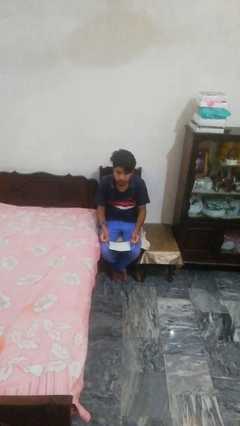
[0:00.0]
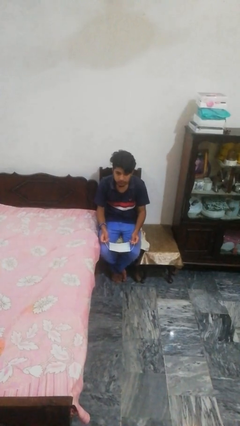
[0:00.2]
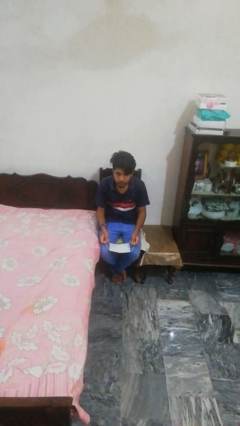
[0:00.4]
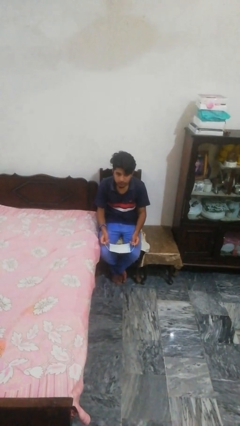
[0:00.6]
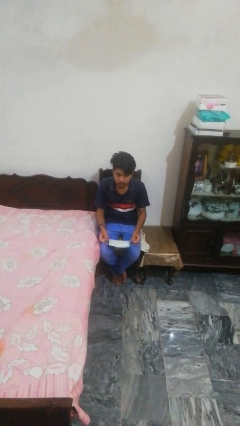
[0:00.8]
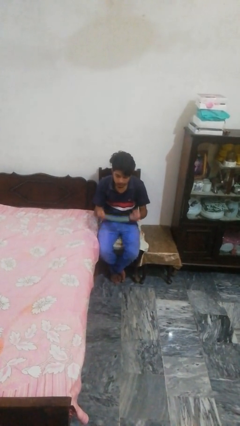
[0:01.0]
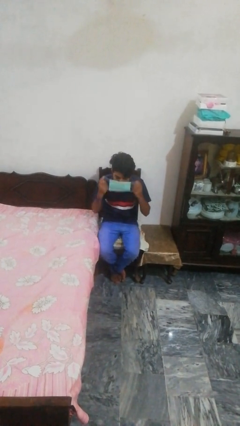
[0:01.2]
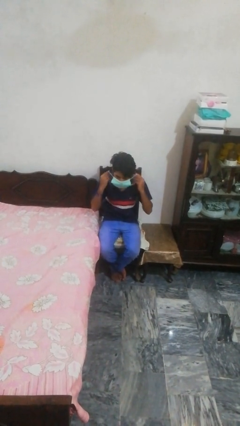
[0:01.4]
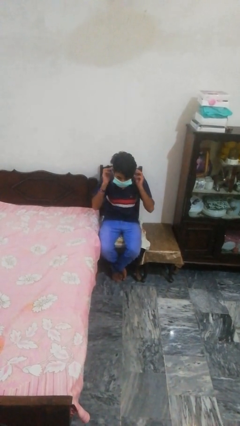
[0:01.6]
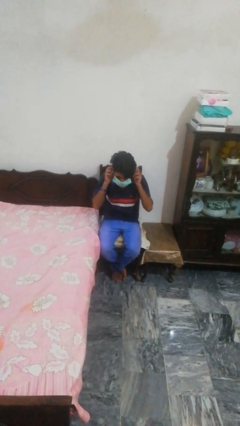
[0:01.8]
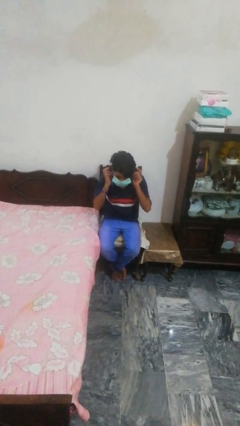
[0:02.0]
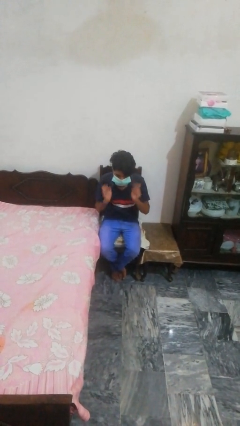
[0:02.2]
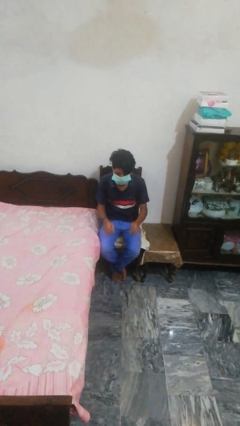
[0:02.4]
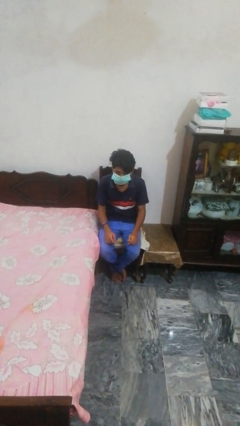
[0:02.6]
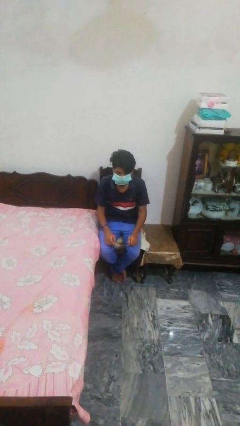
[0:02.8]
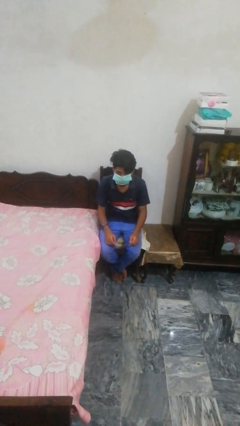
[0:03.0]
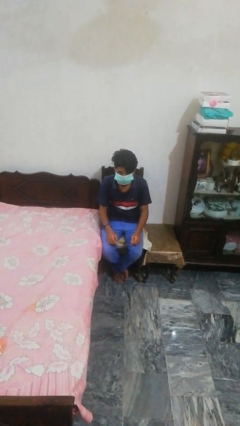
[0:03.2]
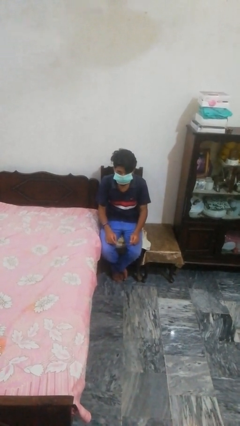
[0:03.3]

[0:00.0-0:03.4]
person puts on facemask

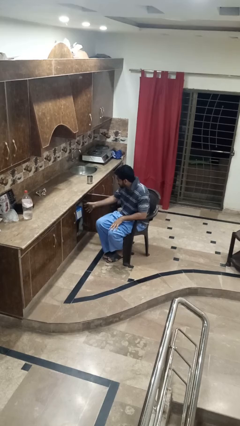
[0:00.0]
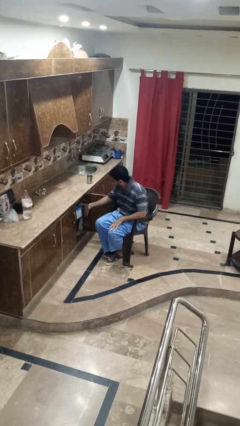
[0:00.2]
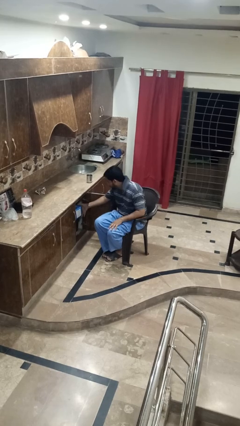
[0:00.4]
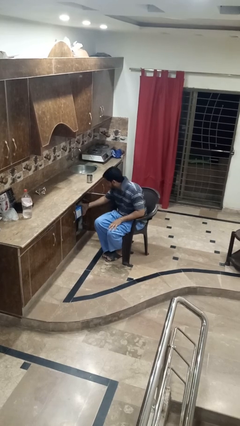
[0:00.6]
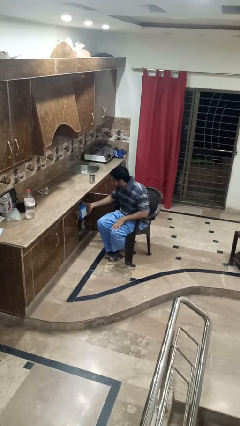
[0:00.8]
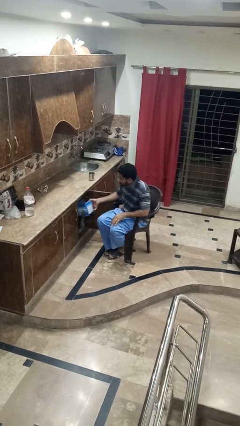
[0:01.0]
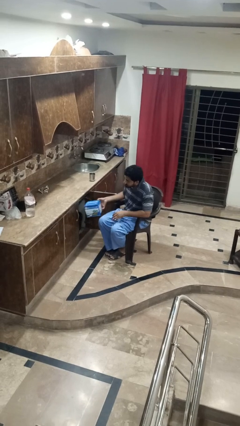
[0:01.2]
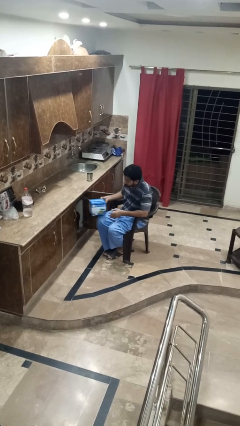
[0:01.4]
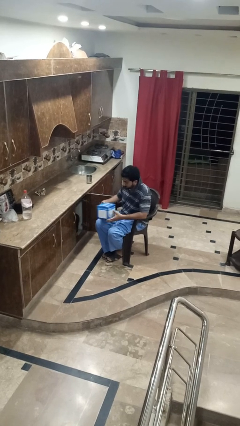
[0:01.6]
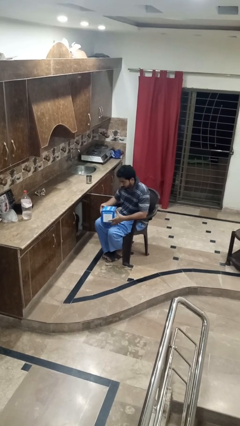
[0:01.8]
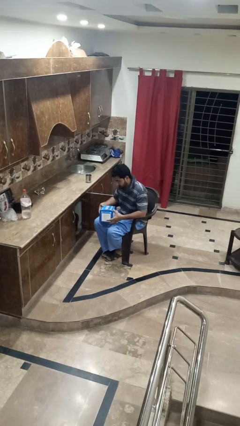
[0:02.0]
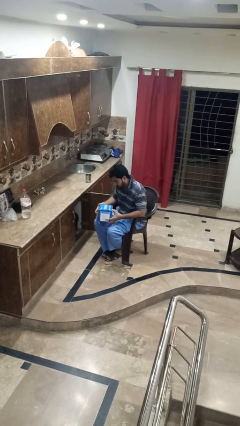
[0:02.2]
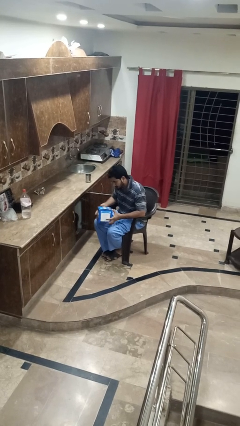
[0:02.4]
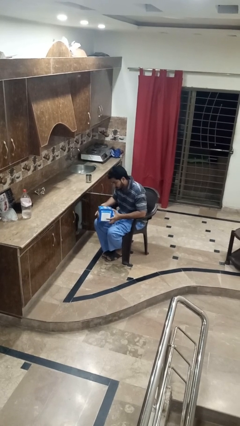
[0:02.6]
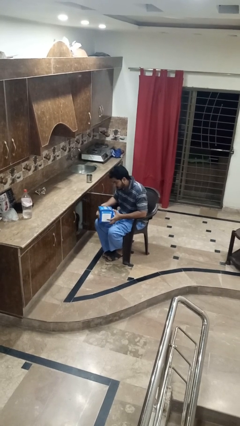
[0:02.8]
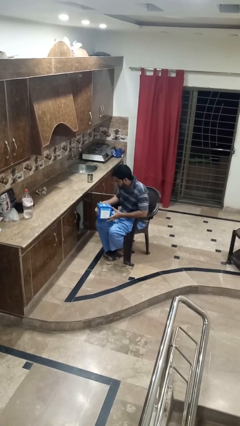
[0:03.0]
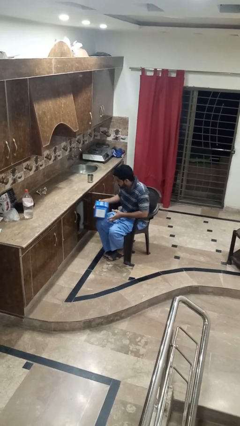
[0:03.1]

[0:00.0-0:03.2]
person picks up object from cabinet

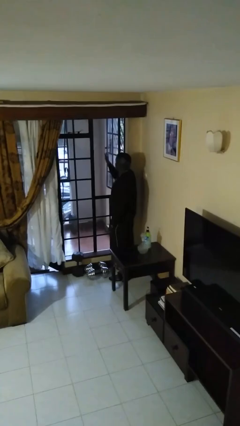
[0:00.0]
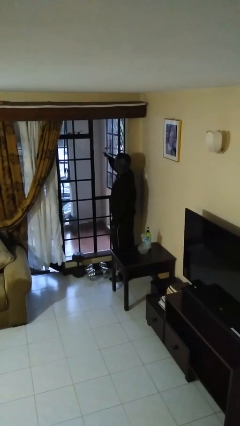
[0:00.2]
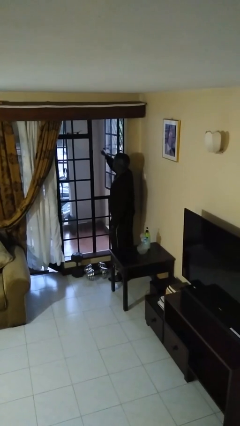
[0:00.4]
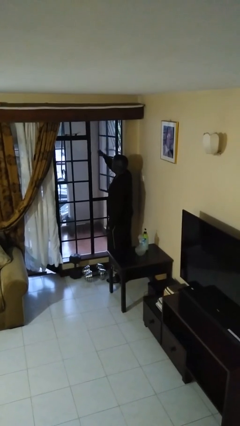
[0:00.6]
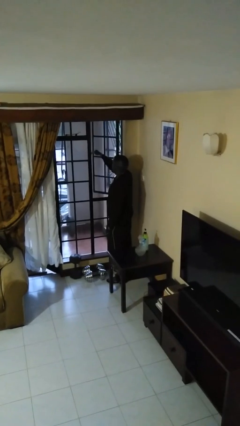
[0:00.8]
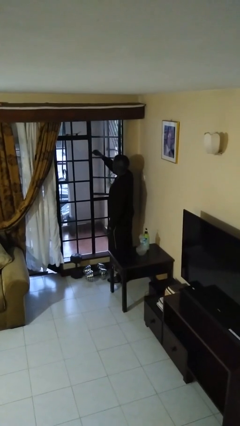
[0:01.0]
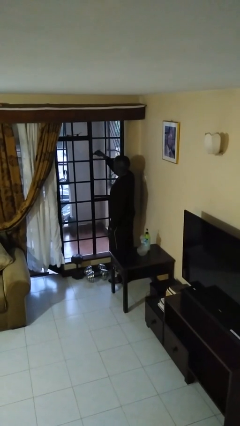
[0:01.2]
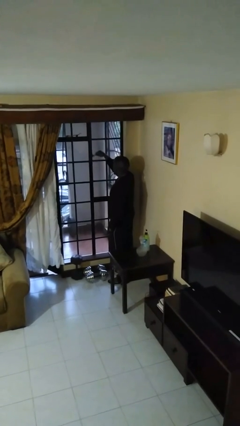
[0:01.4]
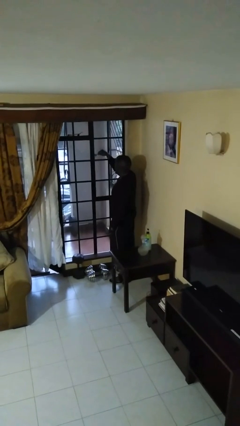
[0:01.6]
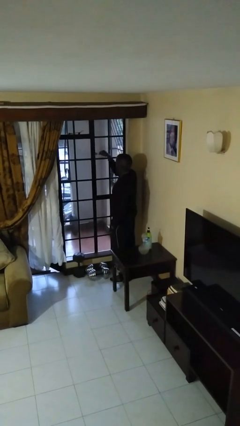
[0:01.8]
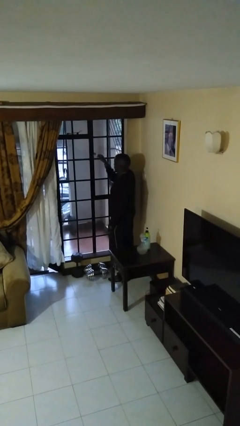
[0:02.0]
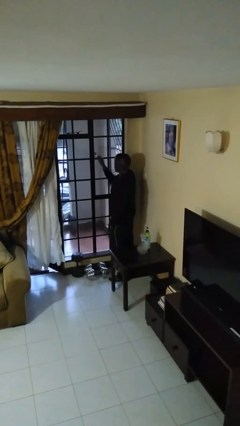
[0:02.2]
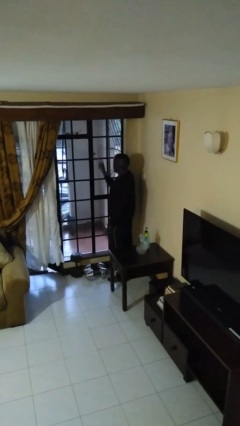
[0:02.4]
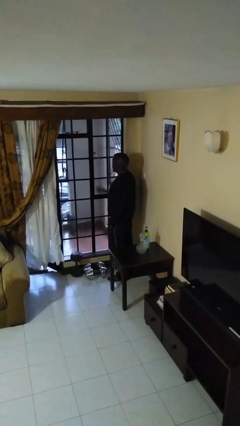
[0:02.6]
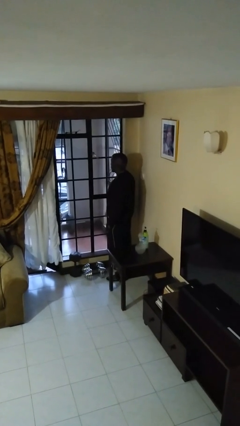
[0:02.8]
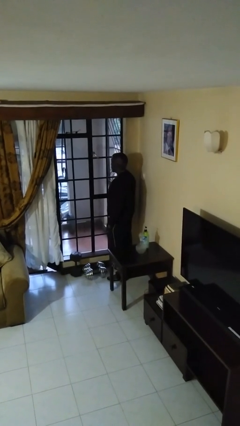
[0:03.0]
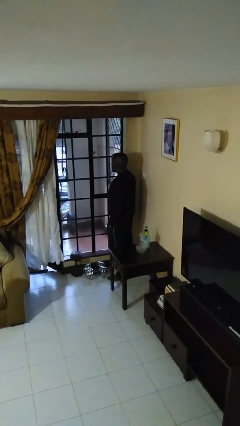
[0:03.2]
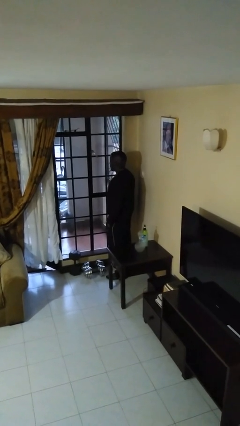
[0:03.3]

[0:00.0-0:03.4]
person closes home window

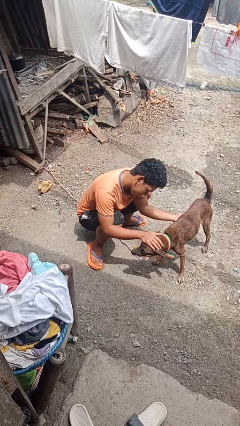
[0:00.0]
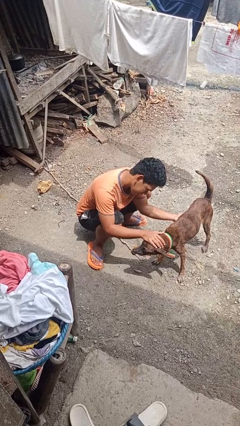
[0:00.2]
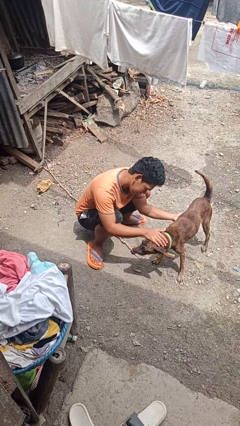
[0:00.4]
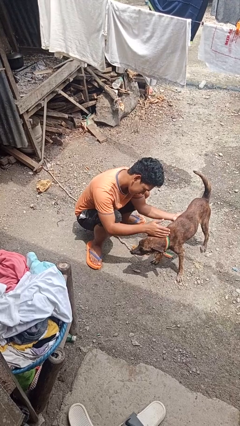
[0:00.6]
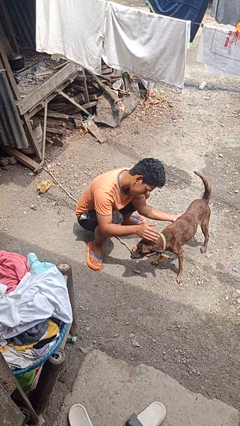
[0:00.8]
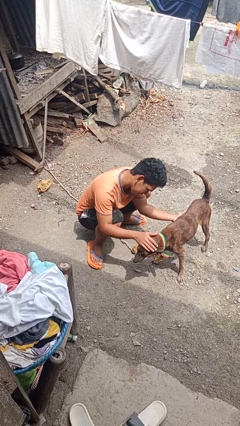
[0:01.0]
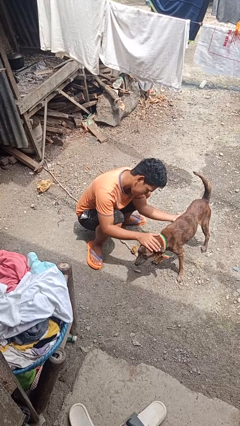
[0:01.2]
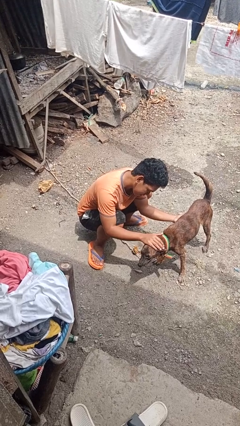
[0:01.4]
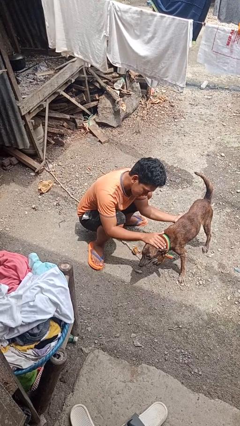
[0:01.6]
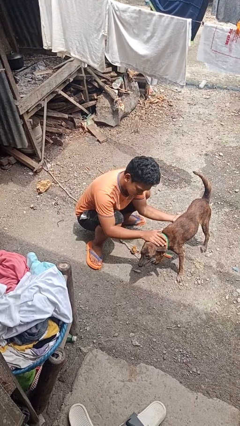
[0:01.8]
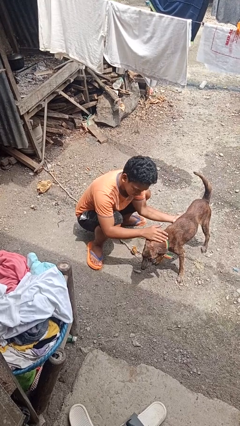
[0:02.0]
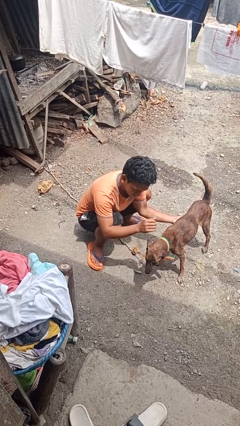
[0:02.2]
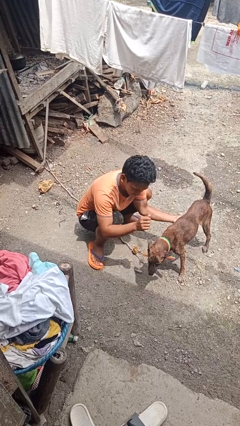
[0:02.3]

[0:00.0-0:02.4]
person pets dog

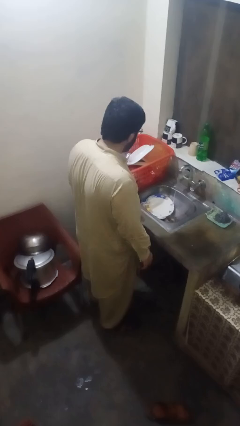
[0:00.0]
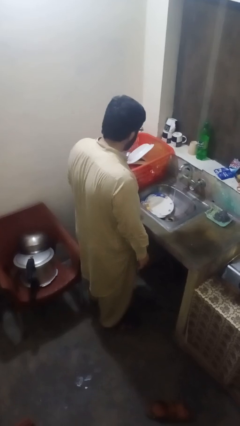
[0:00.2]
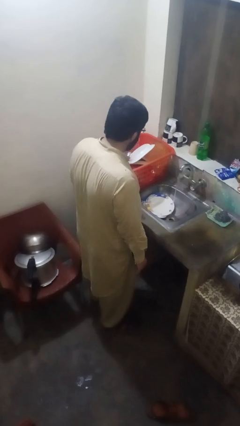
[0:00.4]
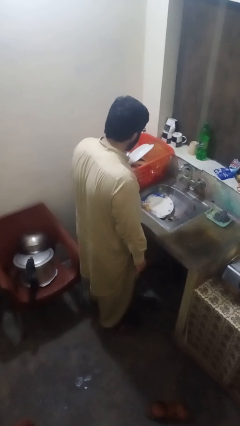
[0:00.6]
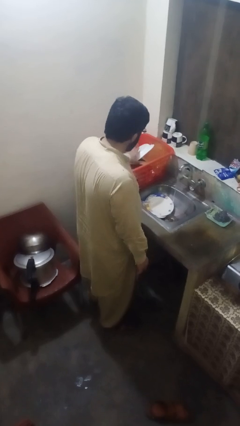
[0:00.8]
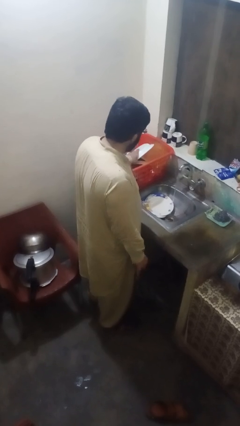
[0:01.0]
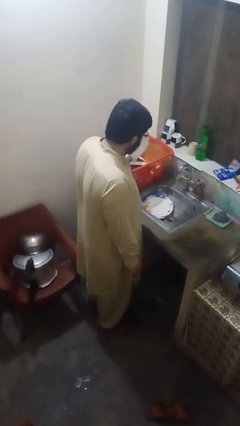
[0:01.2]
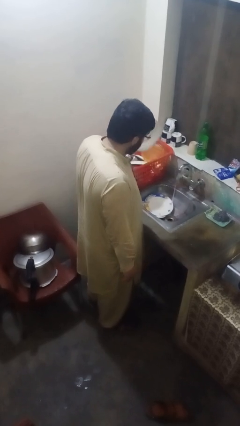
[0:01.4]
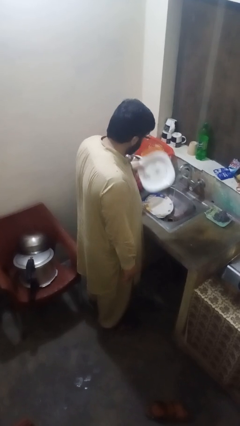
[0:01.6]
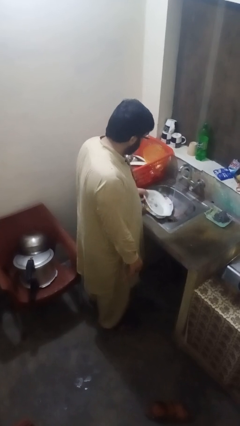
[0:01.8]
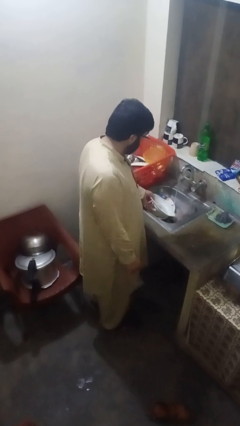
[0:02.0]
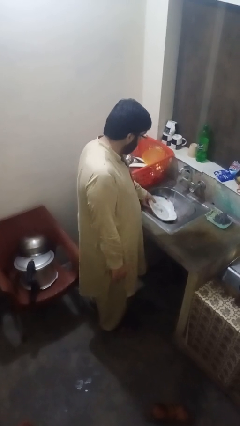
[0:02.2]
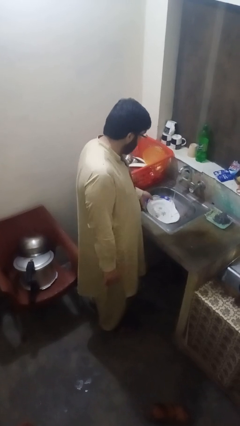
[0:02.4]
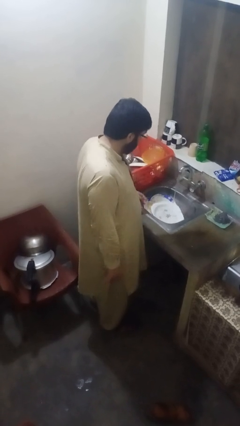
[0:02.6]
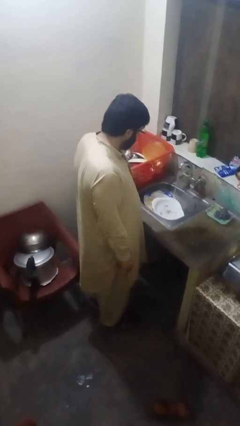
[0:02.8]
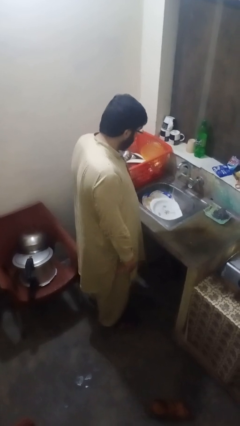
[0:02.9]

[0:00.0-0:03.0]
person unloads dishwasher

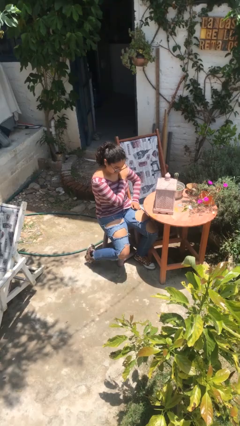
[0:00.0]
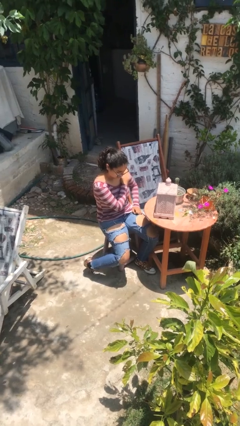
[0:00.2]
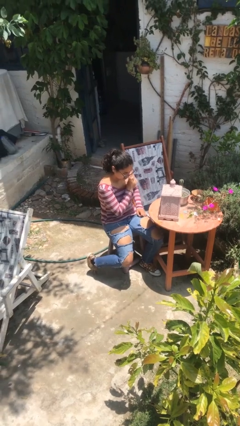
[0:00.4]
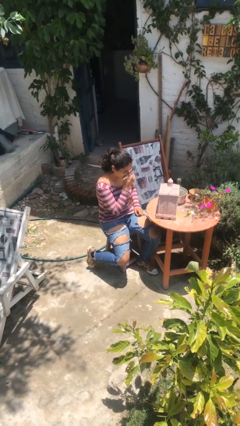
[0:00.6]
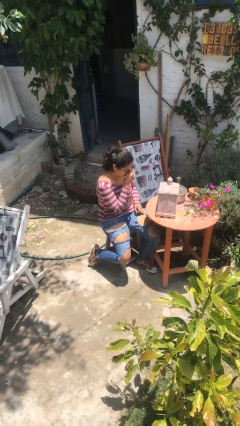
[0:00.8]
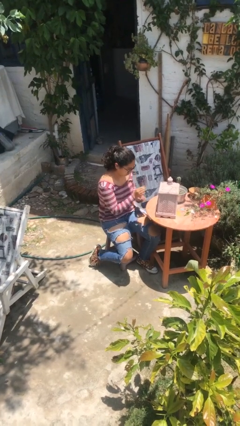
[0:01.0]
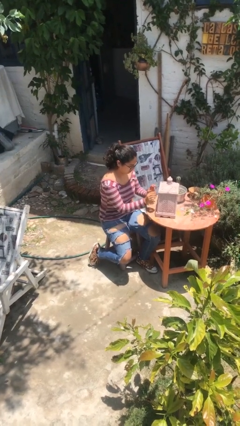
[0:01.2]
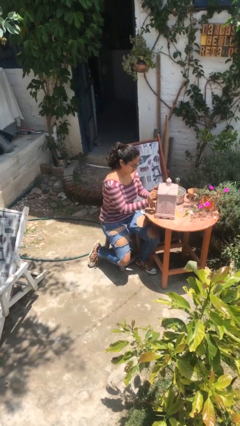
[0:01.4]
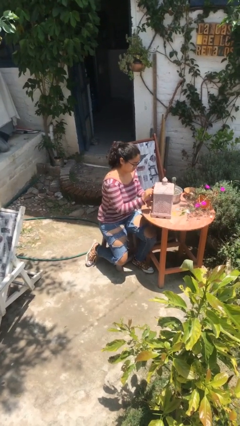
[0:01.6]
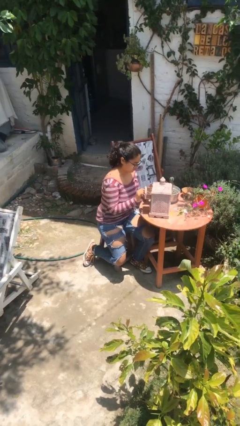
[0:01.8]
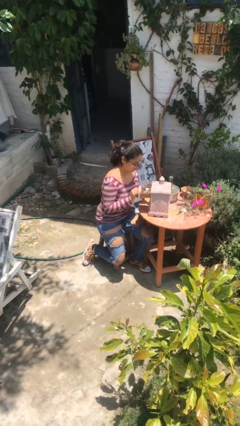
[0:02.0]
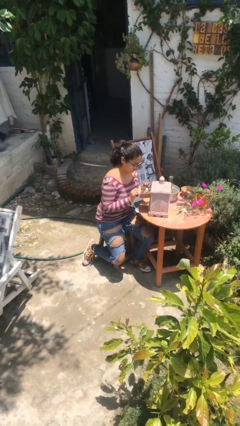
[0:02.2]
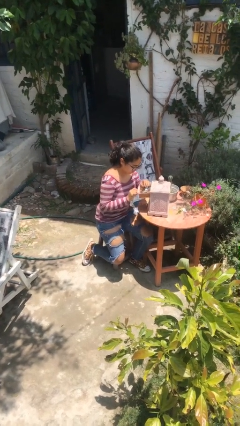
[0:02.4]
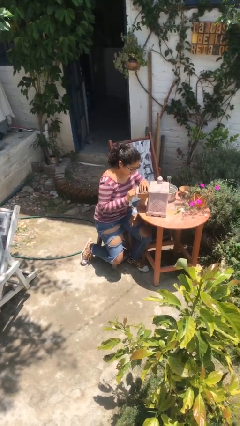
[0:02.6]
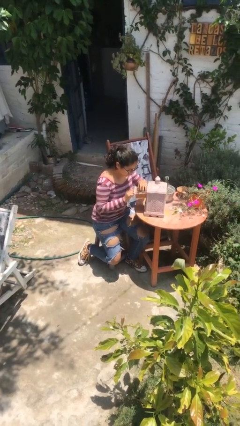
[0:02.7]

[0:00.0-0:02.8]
person opens jewelry box
